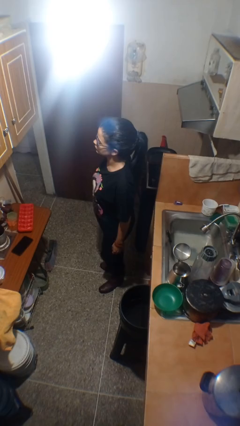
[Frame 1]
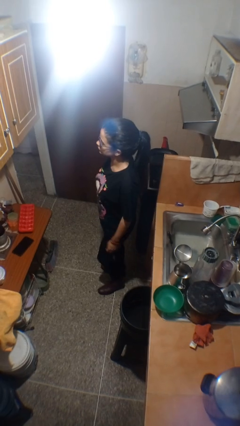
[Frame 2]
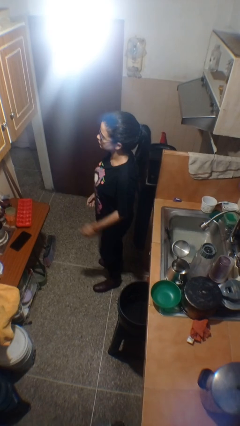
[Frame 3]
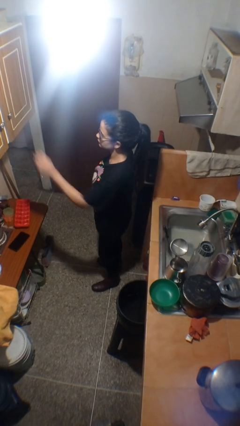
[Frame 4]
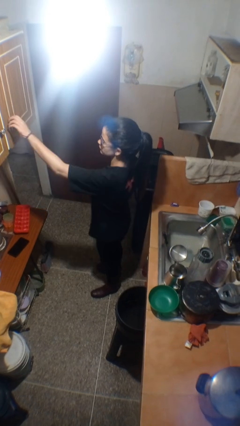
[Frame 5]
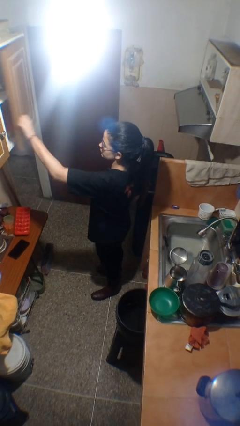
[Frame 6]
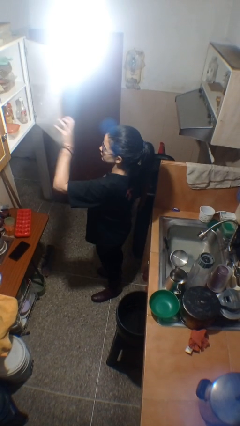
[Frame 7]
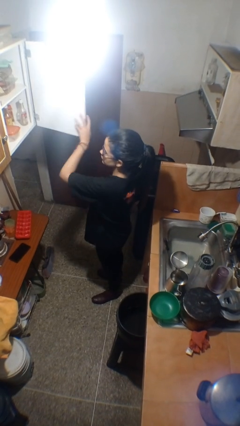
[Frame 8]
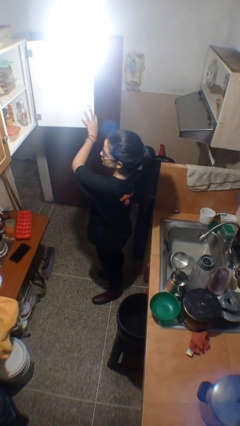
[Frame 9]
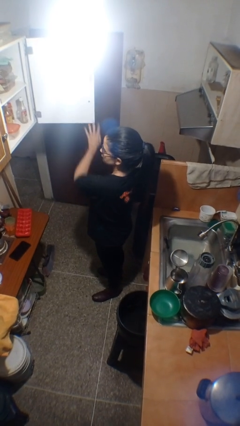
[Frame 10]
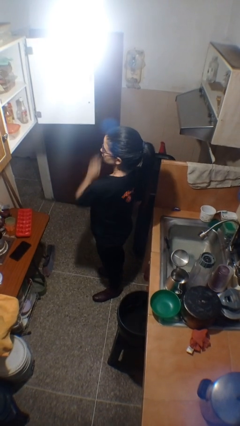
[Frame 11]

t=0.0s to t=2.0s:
person opens cabinet

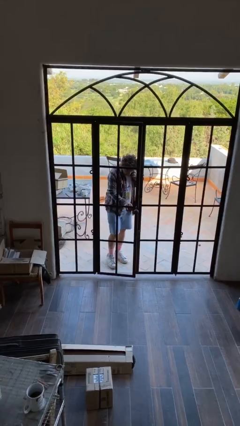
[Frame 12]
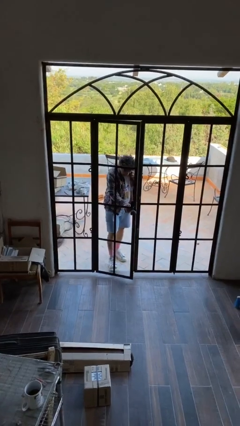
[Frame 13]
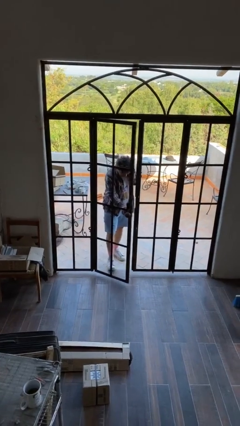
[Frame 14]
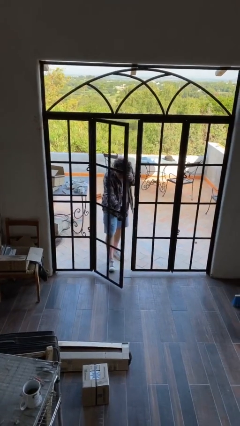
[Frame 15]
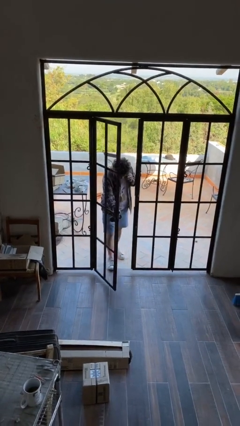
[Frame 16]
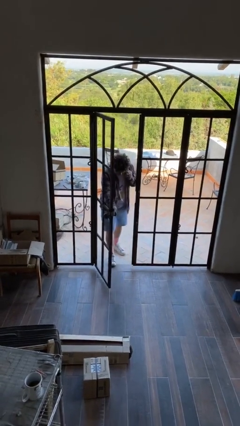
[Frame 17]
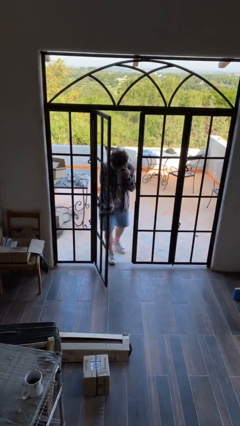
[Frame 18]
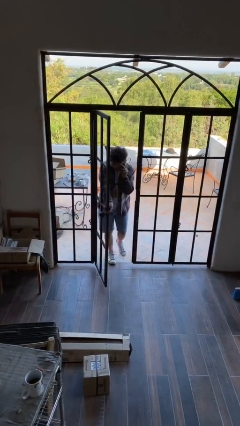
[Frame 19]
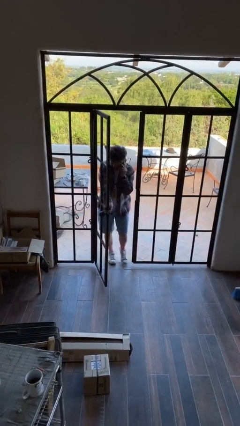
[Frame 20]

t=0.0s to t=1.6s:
person opens facility door

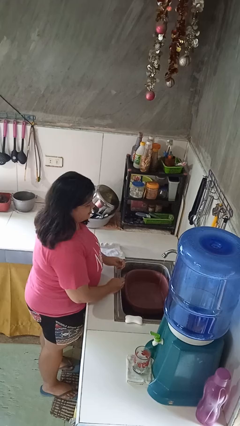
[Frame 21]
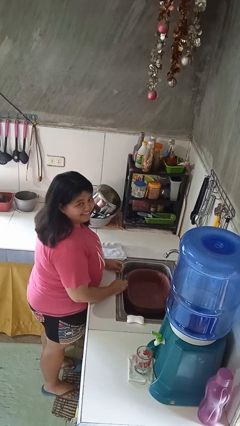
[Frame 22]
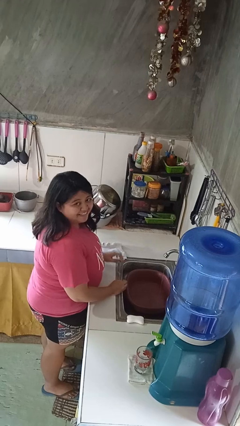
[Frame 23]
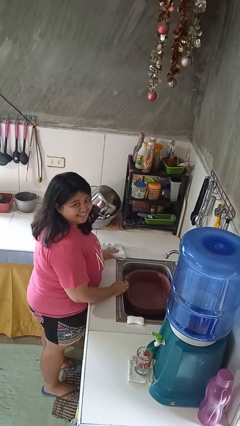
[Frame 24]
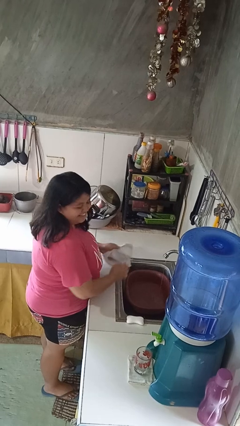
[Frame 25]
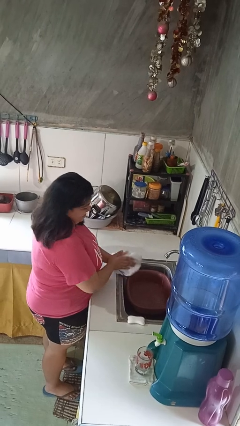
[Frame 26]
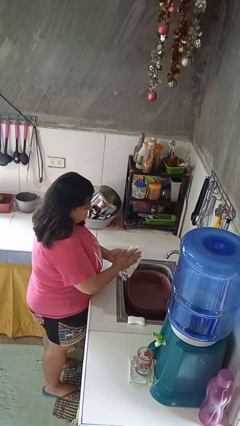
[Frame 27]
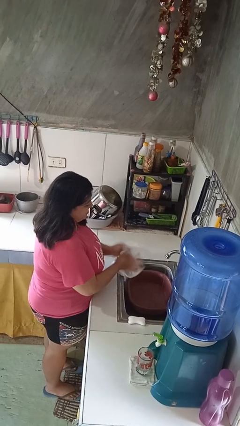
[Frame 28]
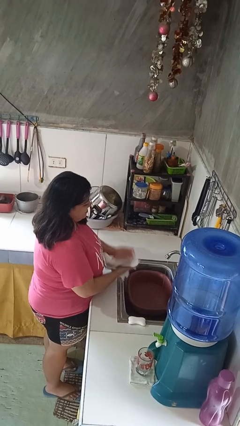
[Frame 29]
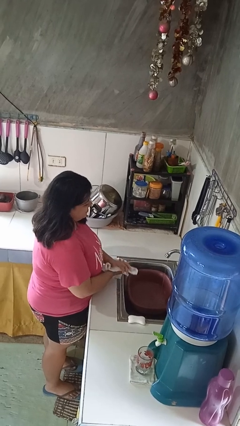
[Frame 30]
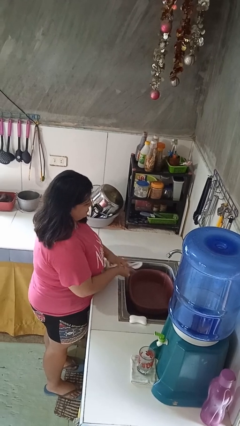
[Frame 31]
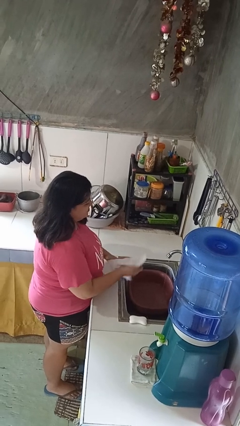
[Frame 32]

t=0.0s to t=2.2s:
person dries hands with towel

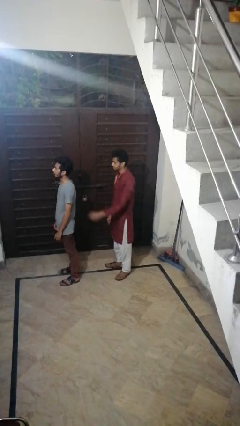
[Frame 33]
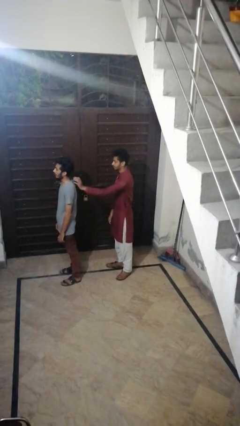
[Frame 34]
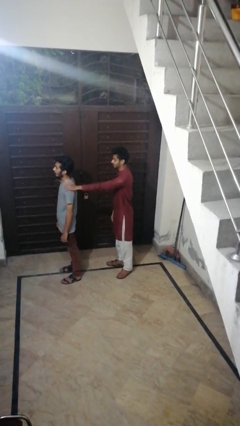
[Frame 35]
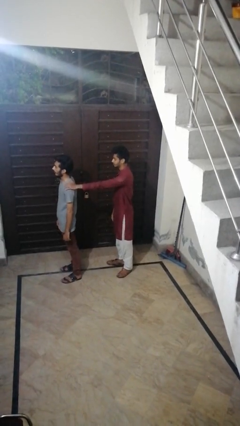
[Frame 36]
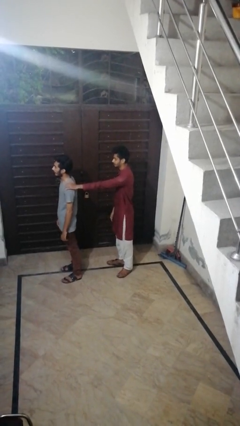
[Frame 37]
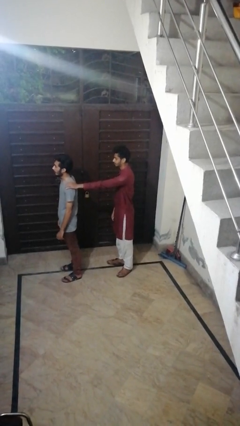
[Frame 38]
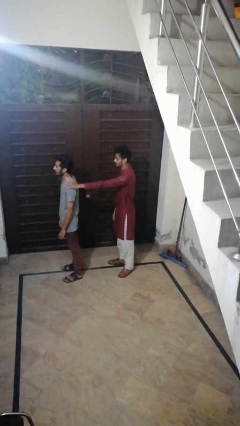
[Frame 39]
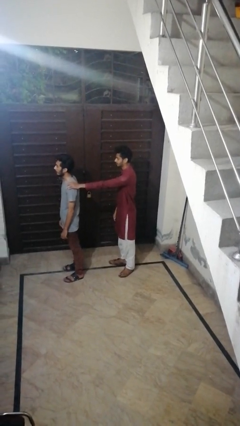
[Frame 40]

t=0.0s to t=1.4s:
person grabs person by shoulder

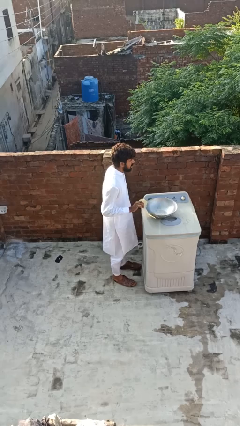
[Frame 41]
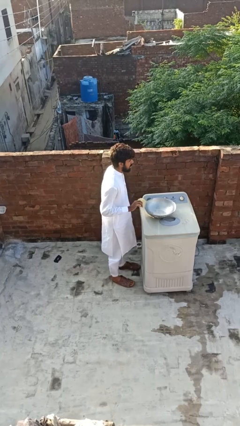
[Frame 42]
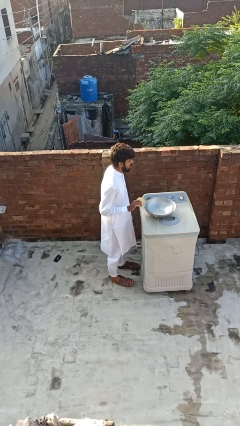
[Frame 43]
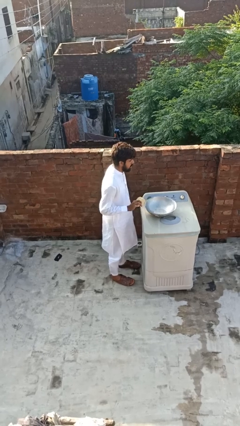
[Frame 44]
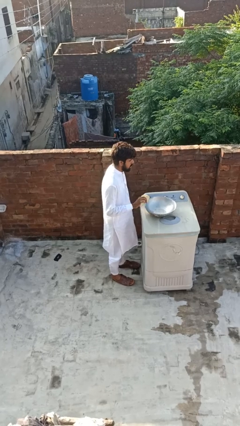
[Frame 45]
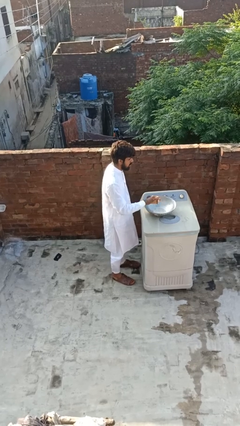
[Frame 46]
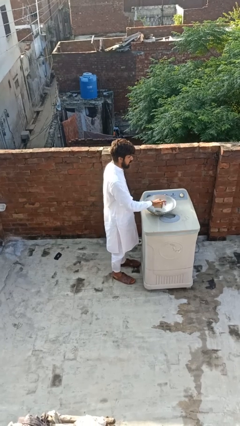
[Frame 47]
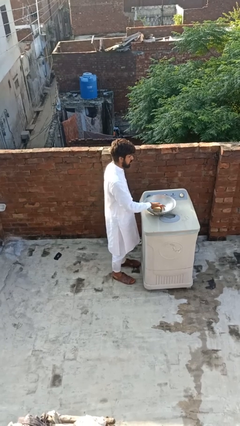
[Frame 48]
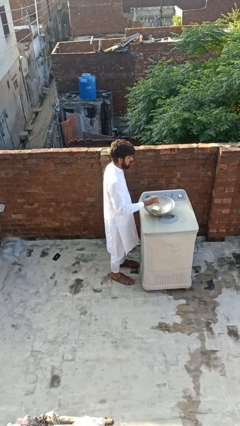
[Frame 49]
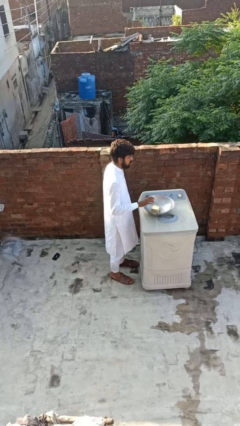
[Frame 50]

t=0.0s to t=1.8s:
person pours into bowl

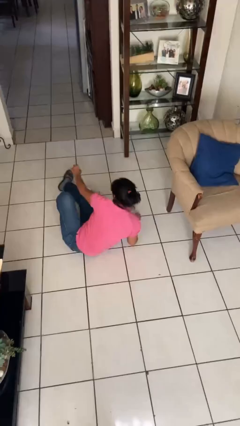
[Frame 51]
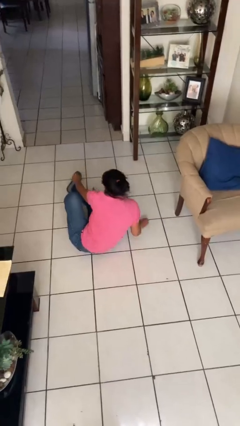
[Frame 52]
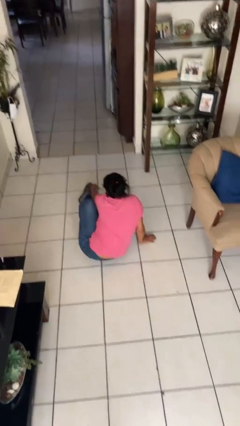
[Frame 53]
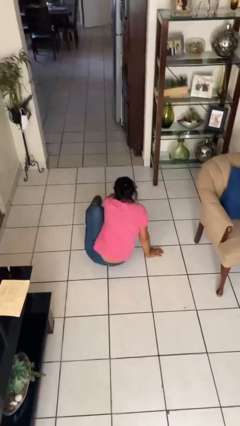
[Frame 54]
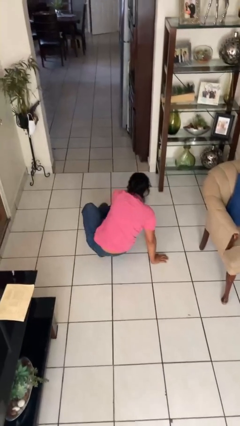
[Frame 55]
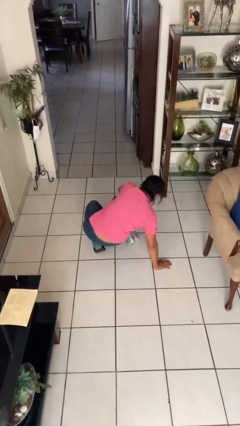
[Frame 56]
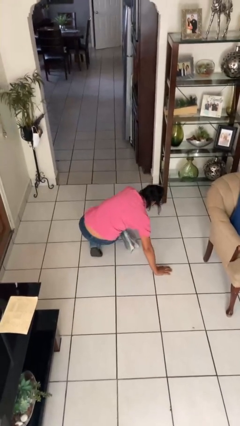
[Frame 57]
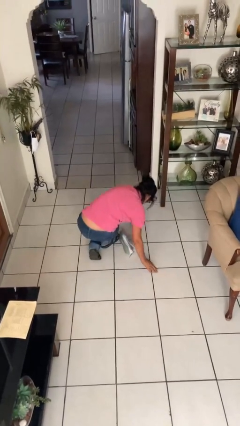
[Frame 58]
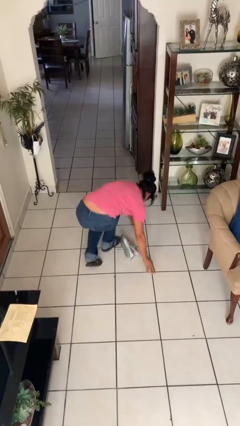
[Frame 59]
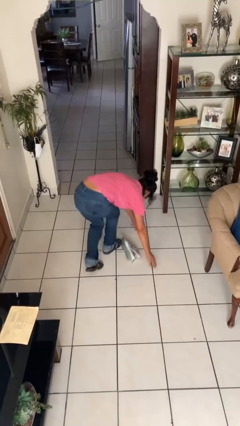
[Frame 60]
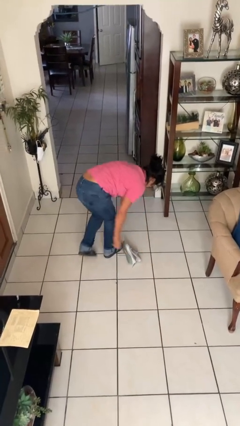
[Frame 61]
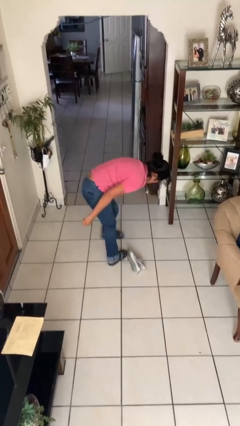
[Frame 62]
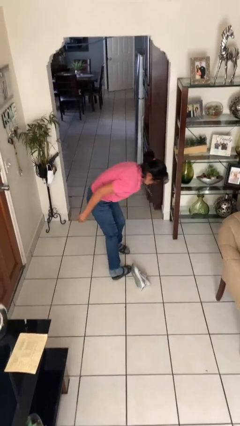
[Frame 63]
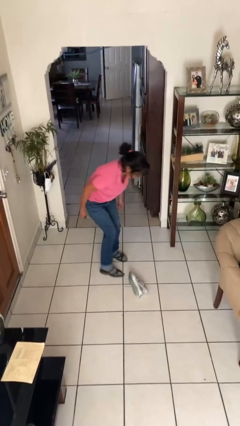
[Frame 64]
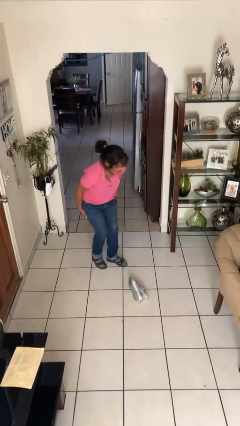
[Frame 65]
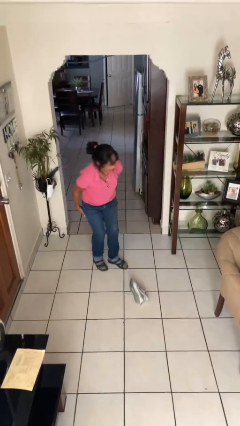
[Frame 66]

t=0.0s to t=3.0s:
person stands up from floor

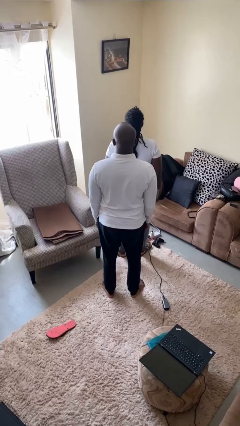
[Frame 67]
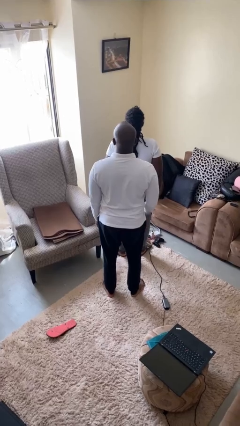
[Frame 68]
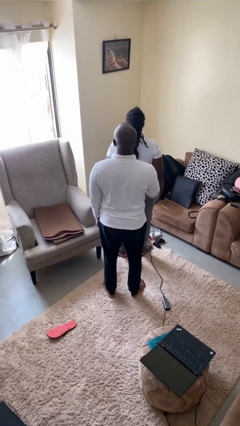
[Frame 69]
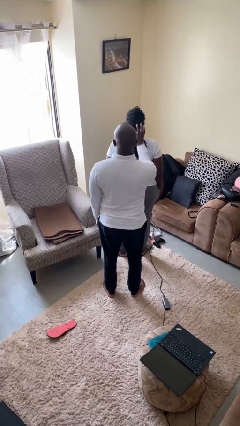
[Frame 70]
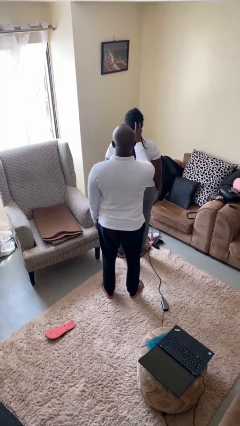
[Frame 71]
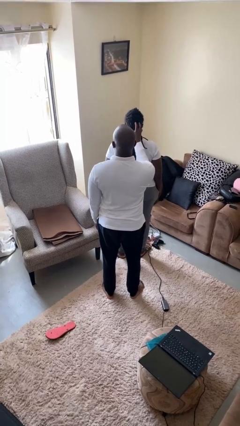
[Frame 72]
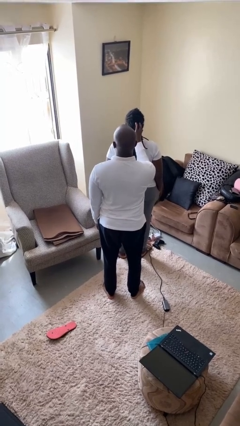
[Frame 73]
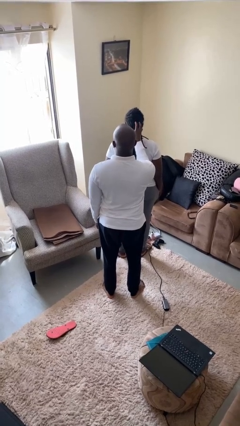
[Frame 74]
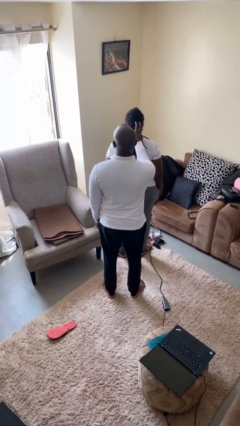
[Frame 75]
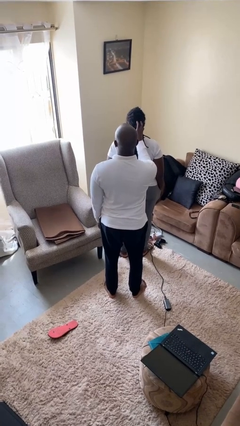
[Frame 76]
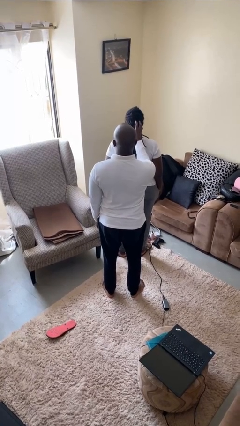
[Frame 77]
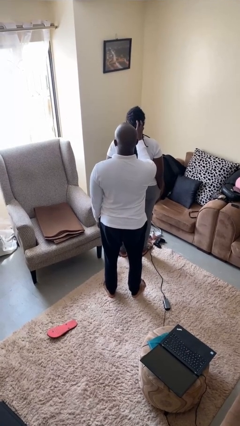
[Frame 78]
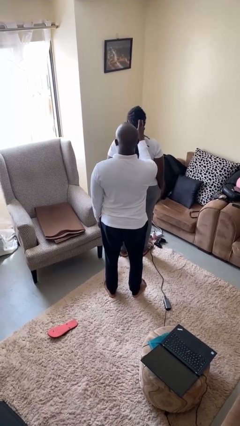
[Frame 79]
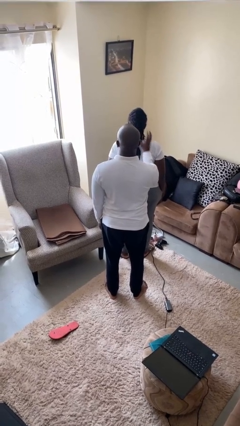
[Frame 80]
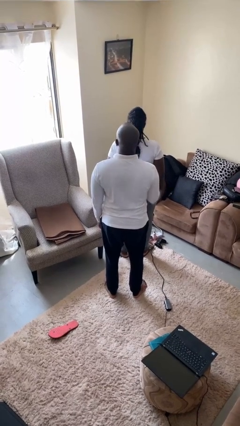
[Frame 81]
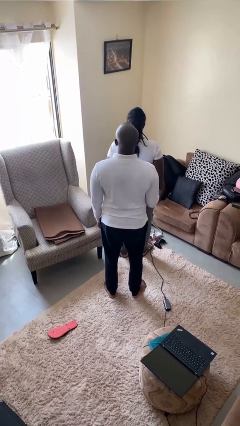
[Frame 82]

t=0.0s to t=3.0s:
person grabs person by hair

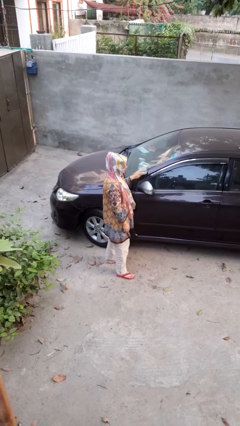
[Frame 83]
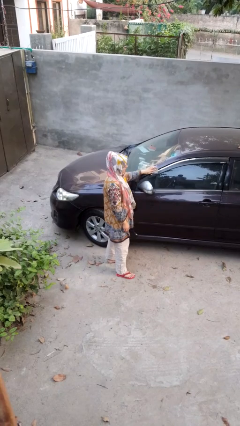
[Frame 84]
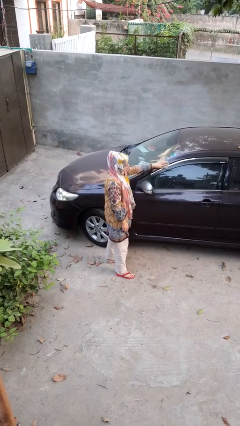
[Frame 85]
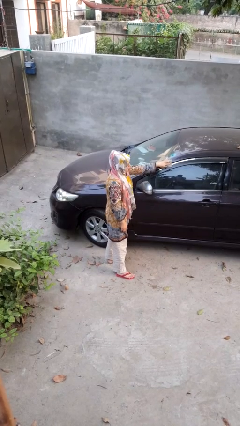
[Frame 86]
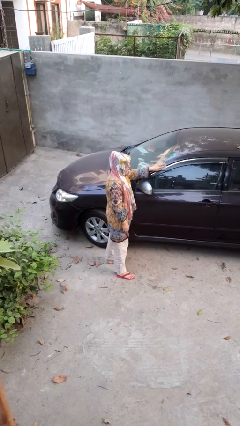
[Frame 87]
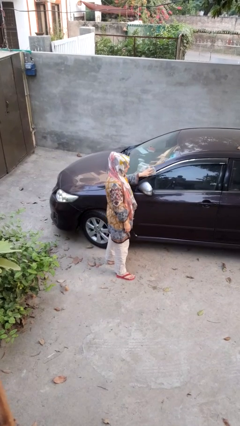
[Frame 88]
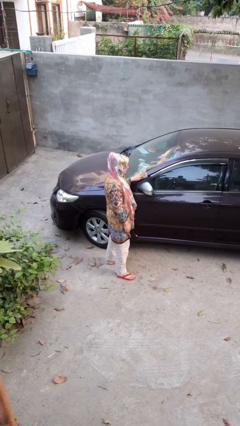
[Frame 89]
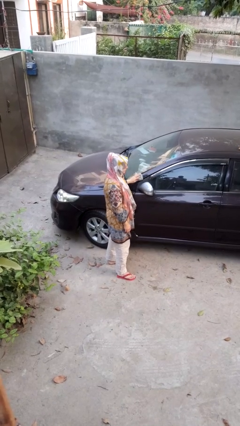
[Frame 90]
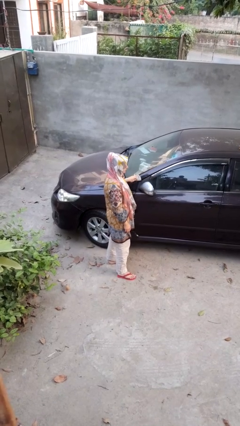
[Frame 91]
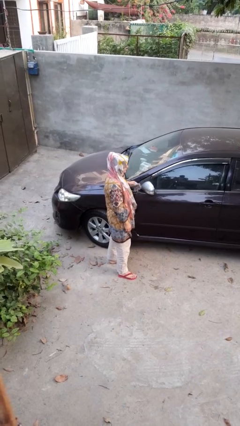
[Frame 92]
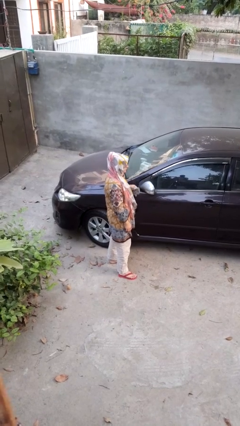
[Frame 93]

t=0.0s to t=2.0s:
person polishes car with rag
